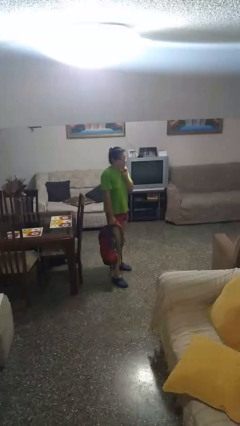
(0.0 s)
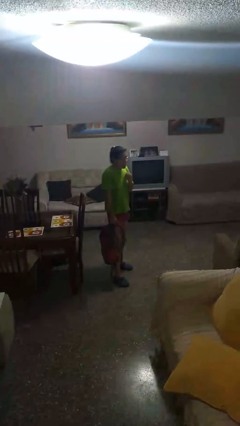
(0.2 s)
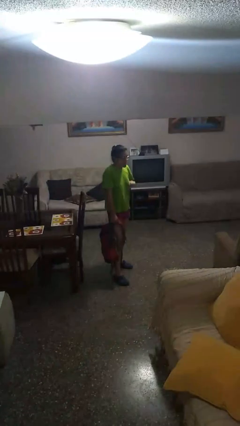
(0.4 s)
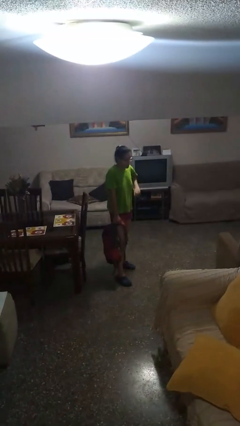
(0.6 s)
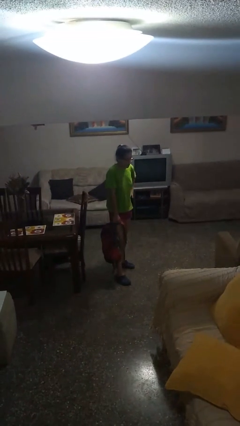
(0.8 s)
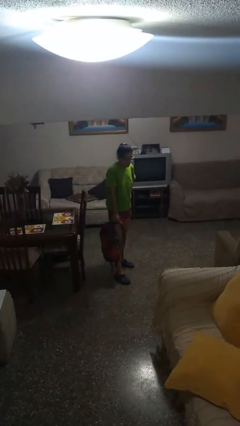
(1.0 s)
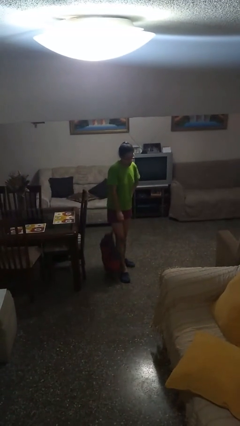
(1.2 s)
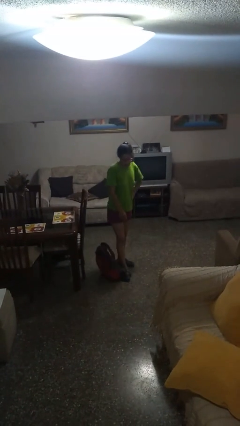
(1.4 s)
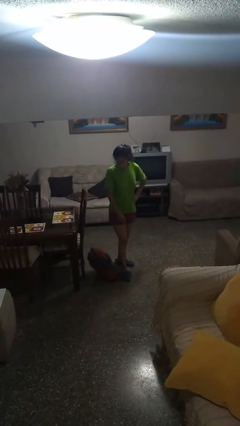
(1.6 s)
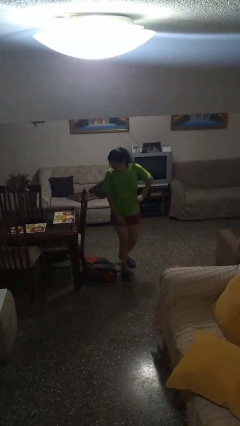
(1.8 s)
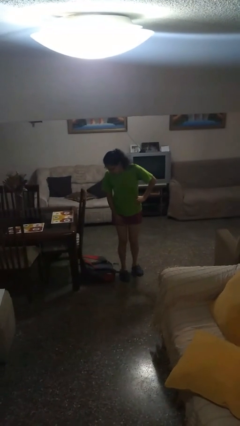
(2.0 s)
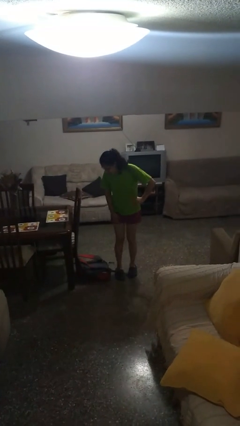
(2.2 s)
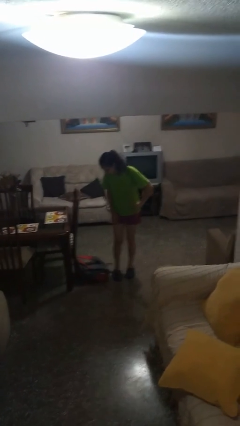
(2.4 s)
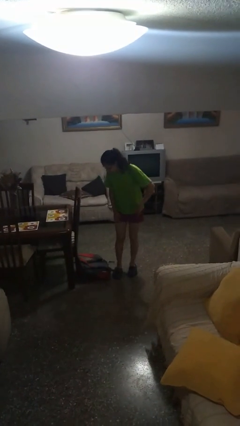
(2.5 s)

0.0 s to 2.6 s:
person drops object

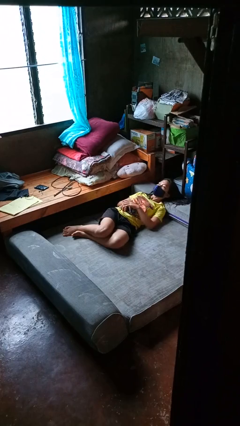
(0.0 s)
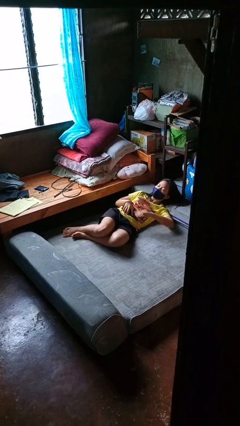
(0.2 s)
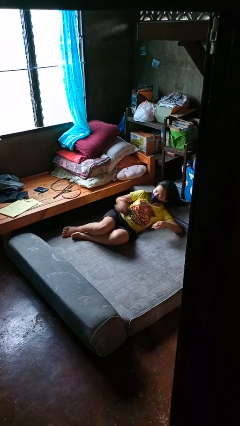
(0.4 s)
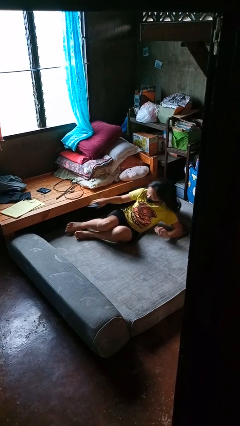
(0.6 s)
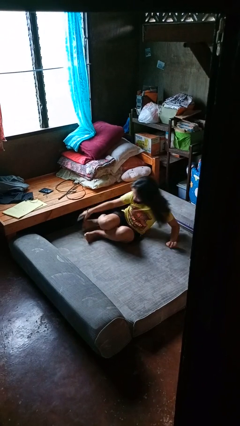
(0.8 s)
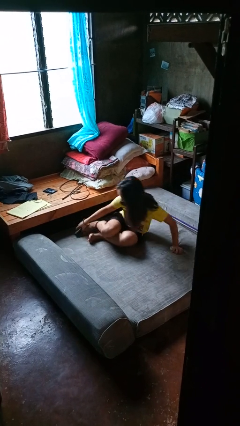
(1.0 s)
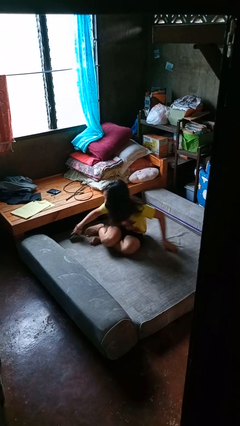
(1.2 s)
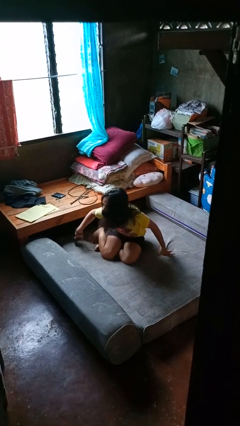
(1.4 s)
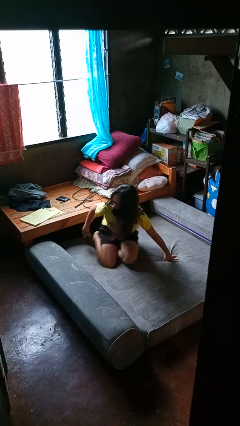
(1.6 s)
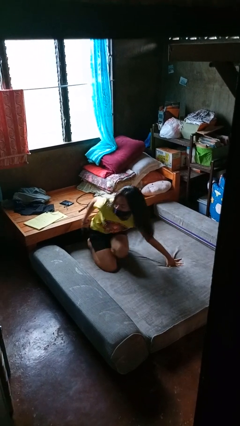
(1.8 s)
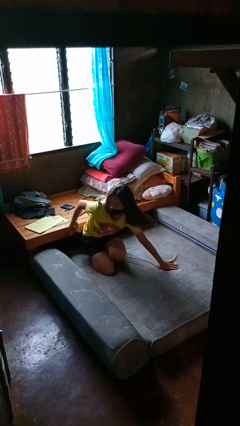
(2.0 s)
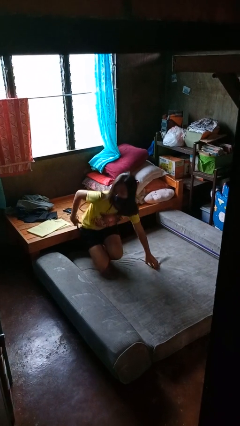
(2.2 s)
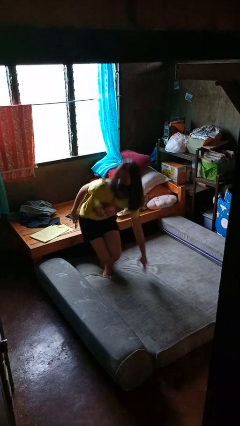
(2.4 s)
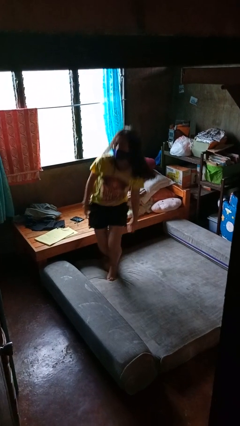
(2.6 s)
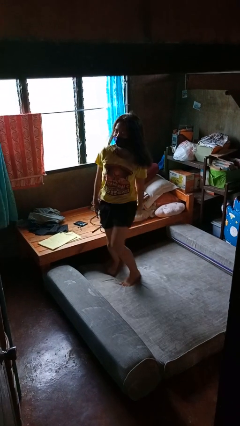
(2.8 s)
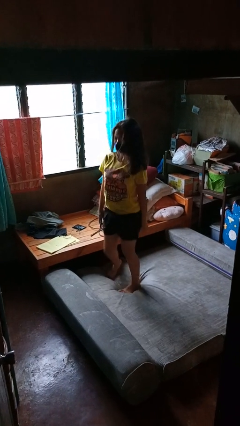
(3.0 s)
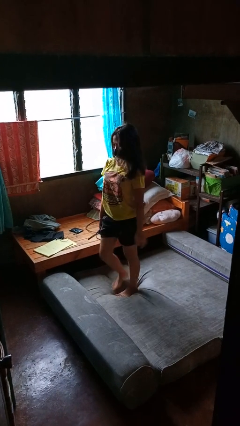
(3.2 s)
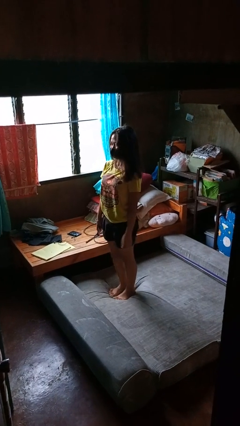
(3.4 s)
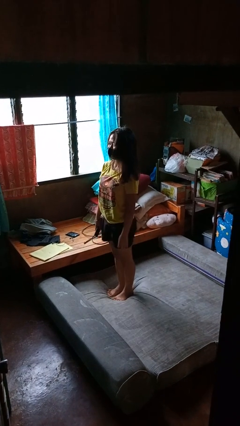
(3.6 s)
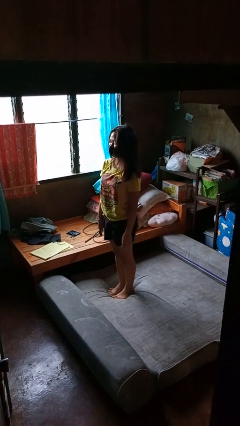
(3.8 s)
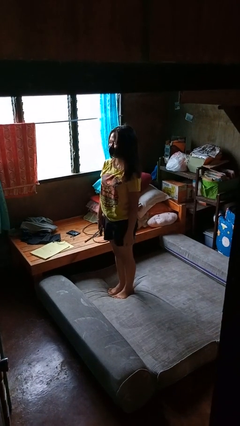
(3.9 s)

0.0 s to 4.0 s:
person stands up

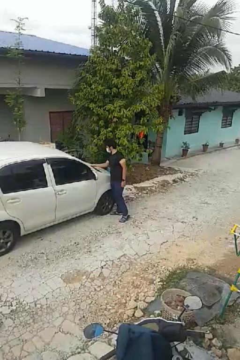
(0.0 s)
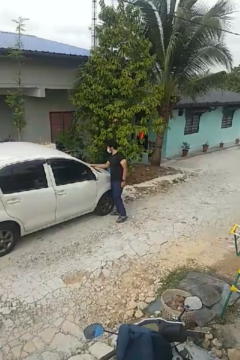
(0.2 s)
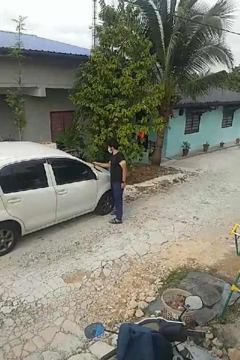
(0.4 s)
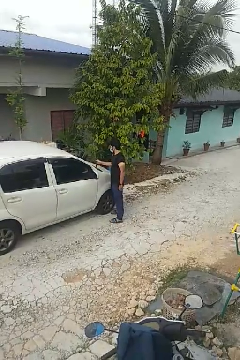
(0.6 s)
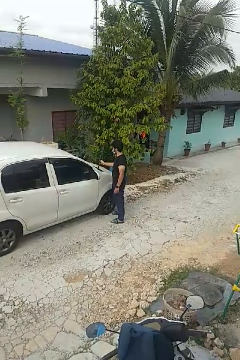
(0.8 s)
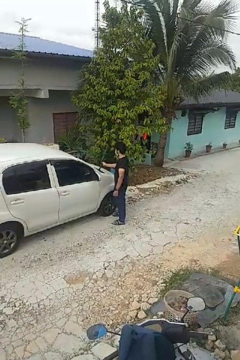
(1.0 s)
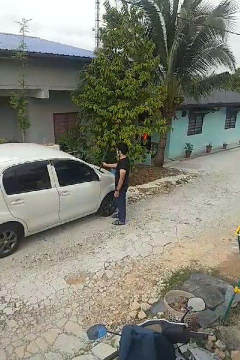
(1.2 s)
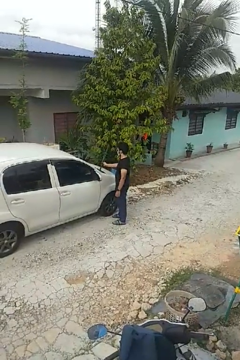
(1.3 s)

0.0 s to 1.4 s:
person flips up car wipers

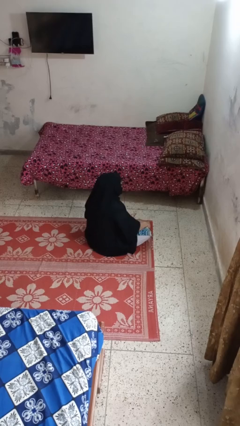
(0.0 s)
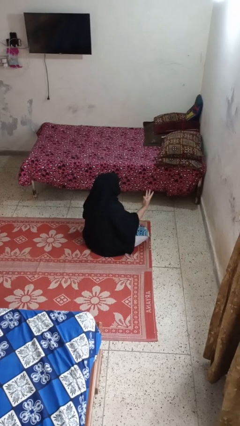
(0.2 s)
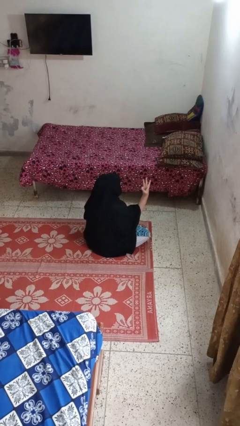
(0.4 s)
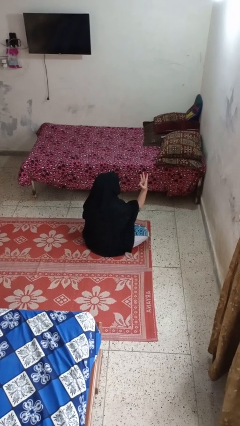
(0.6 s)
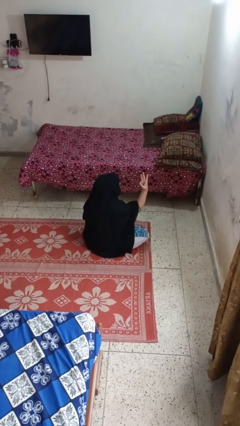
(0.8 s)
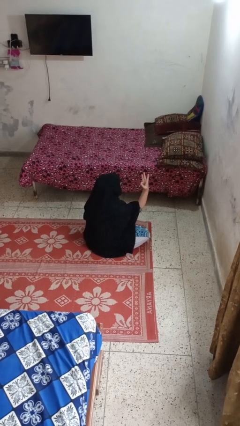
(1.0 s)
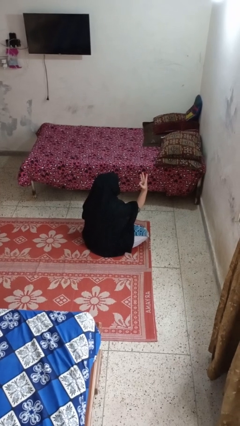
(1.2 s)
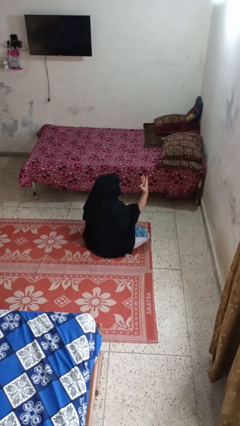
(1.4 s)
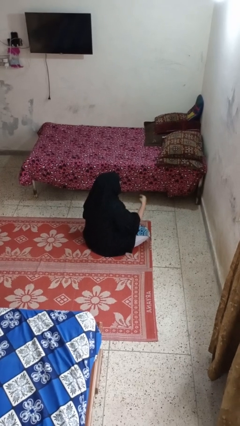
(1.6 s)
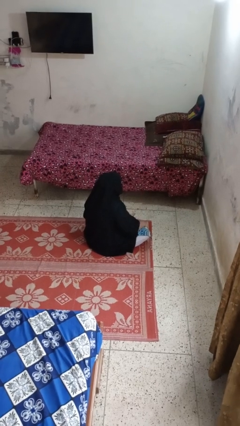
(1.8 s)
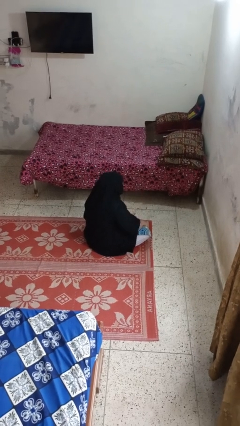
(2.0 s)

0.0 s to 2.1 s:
person gestures number three

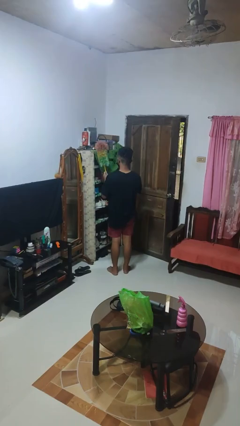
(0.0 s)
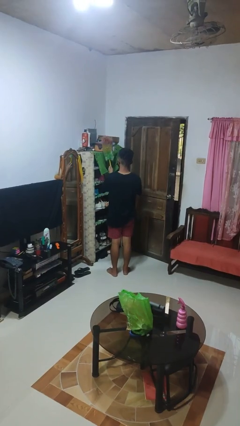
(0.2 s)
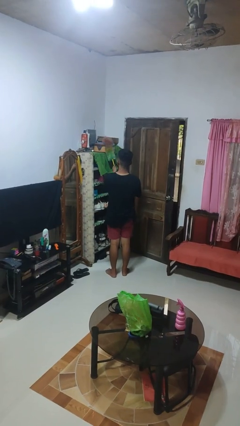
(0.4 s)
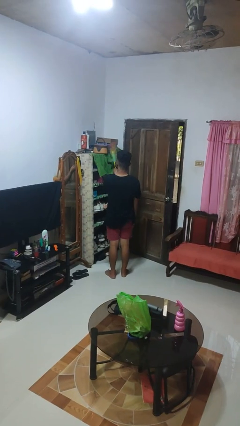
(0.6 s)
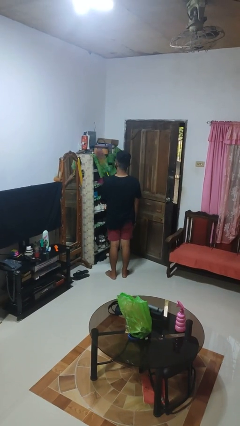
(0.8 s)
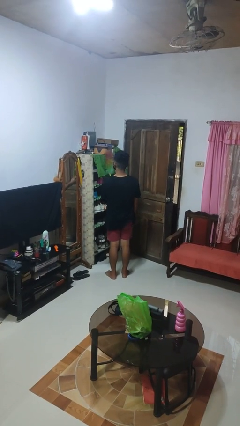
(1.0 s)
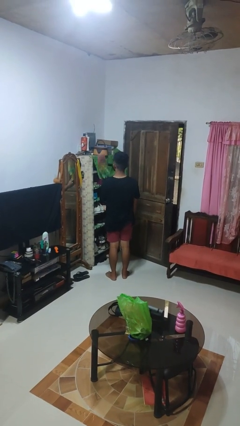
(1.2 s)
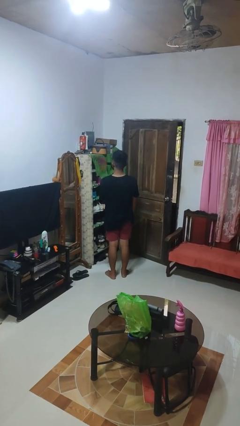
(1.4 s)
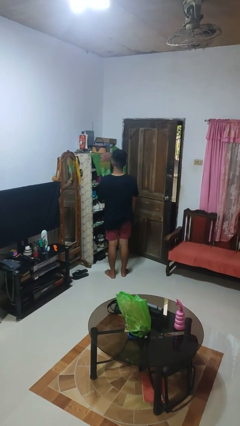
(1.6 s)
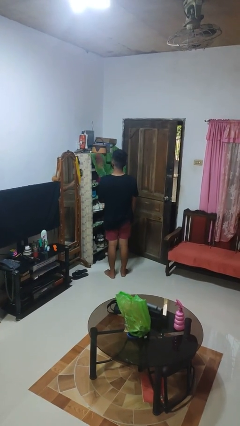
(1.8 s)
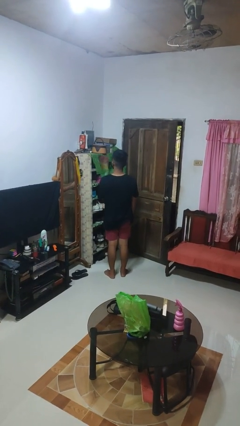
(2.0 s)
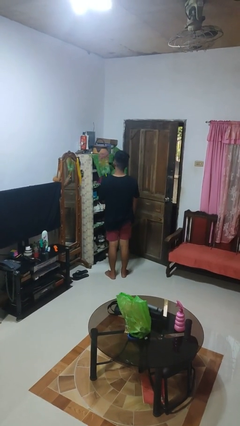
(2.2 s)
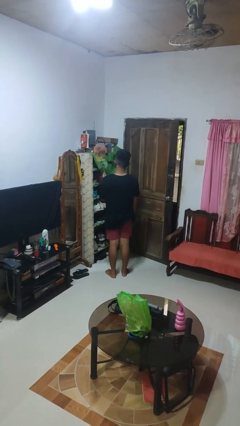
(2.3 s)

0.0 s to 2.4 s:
person dusts furniture

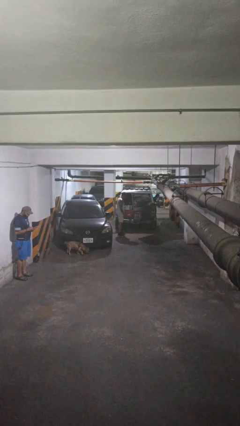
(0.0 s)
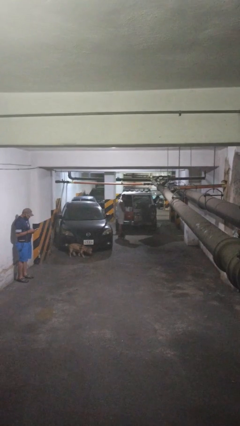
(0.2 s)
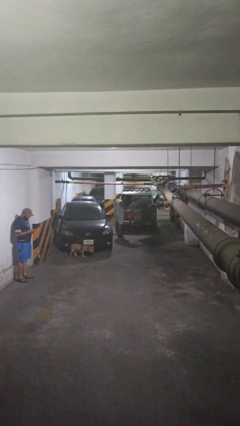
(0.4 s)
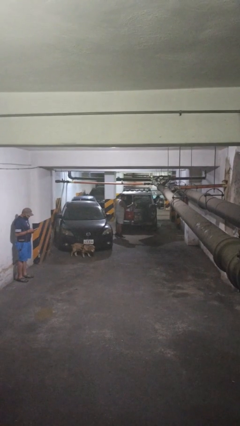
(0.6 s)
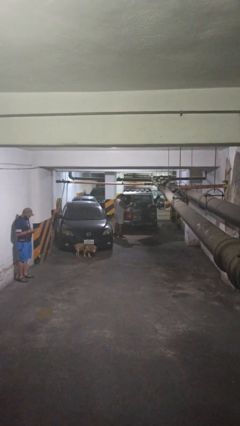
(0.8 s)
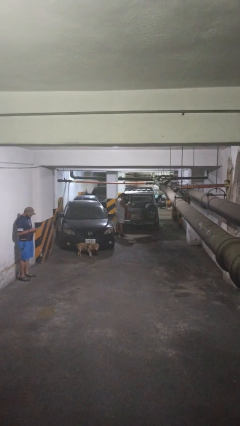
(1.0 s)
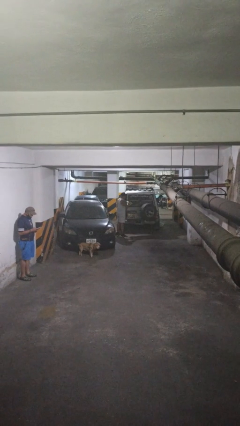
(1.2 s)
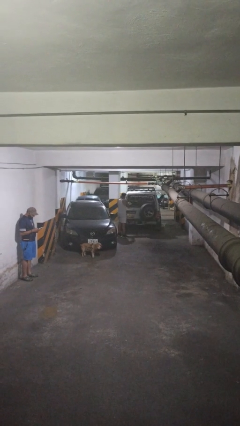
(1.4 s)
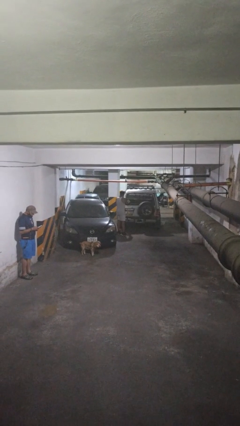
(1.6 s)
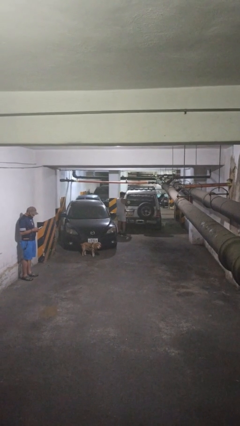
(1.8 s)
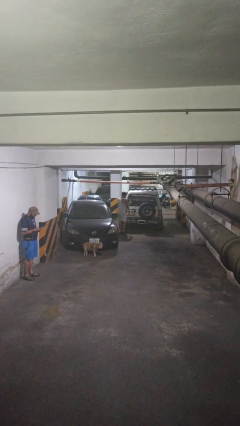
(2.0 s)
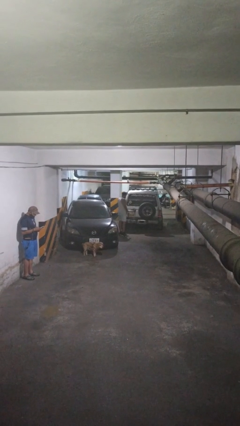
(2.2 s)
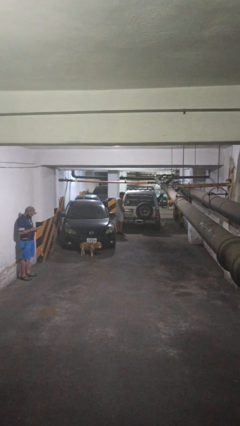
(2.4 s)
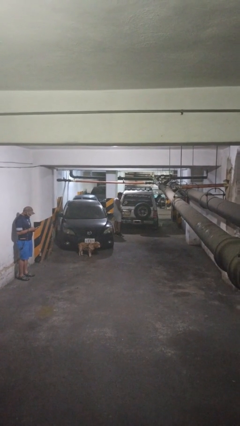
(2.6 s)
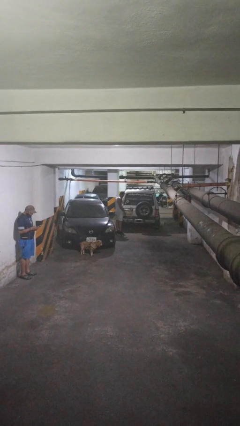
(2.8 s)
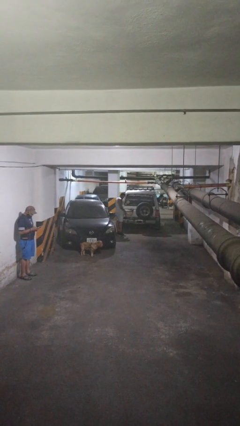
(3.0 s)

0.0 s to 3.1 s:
person closes car trunk

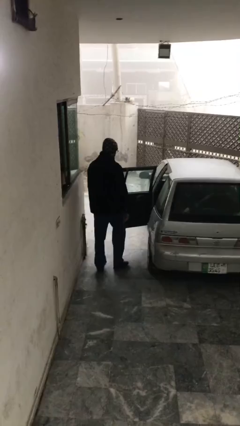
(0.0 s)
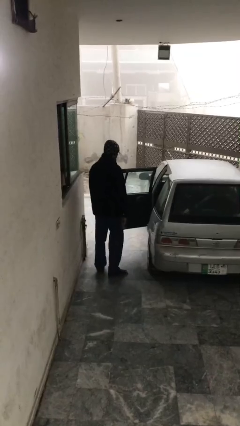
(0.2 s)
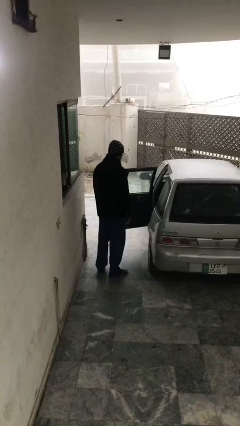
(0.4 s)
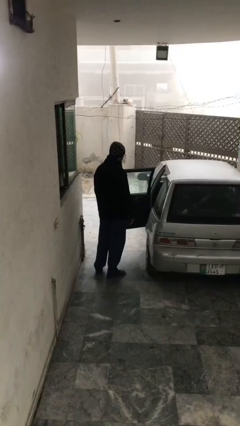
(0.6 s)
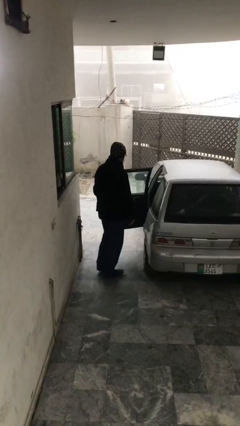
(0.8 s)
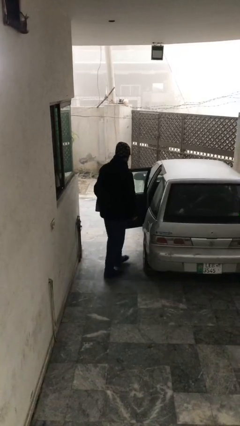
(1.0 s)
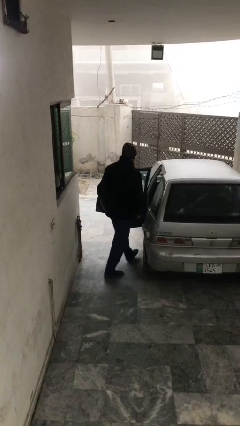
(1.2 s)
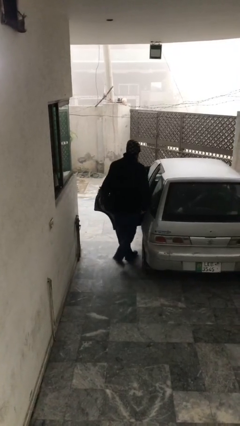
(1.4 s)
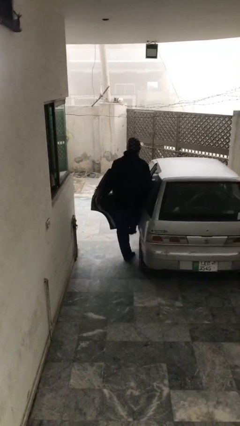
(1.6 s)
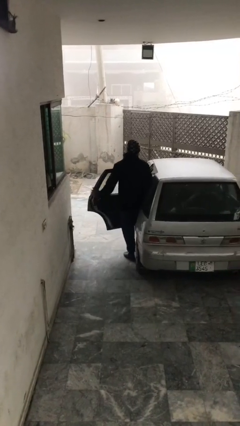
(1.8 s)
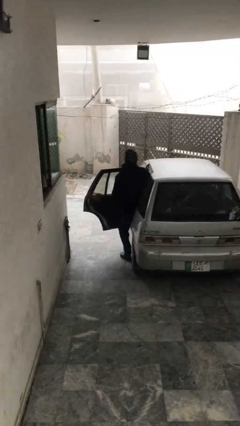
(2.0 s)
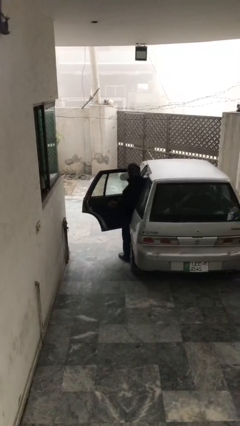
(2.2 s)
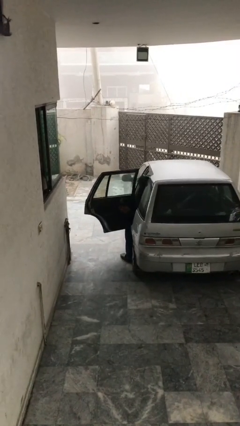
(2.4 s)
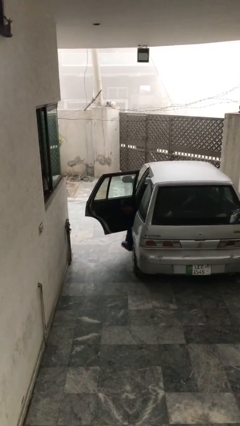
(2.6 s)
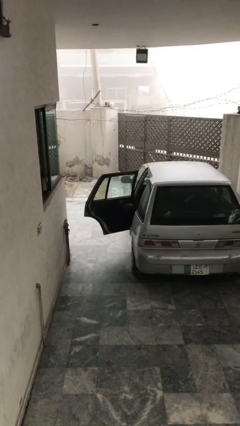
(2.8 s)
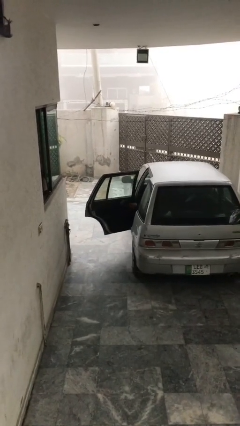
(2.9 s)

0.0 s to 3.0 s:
person enters car
